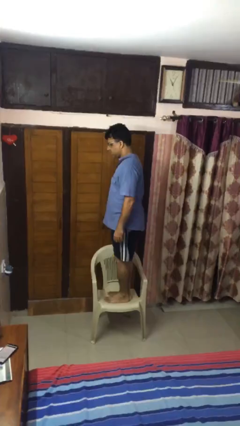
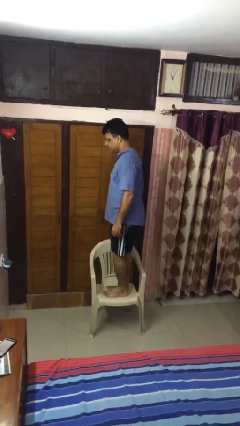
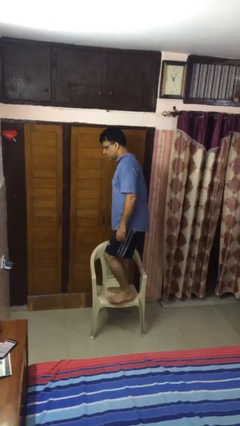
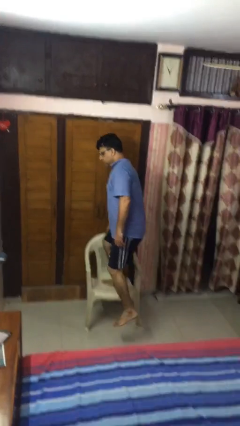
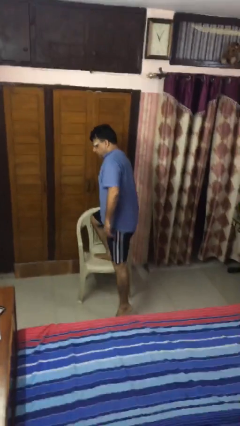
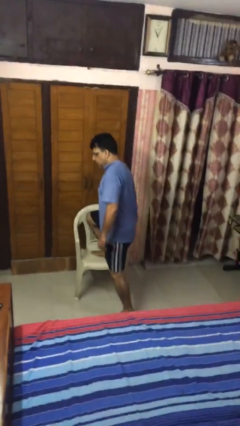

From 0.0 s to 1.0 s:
person climbs off chair

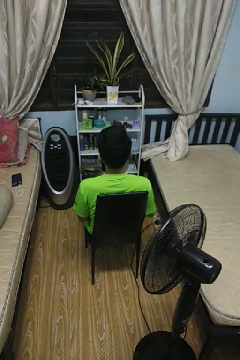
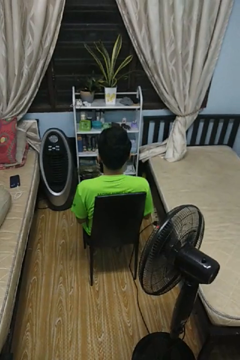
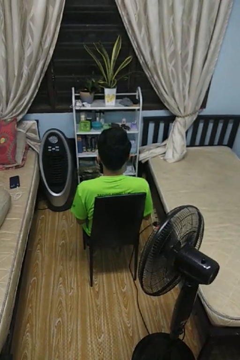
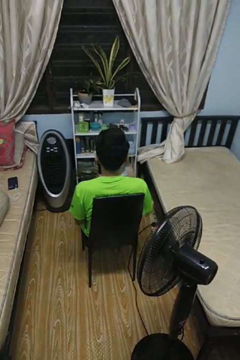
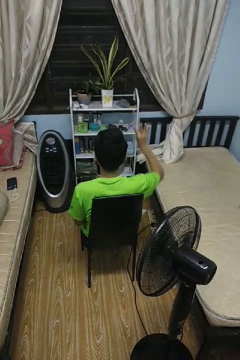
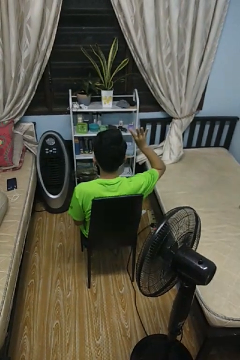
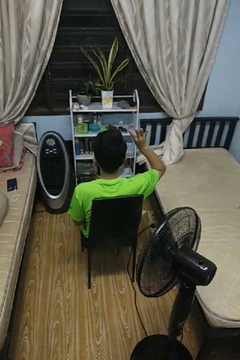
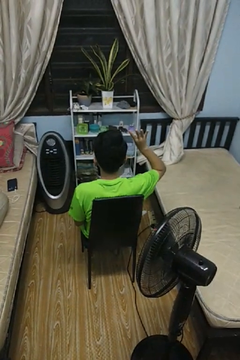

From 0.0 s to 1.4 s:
person gestures number four

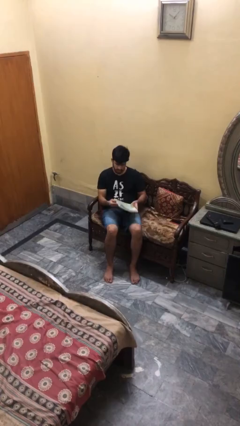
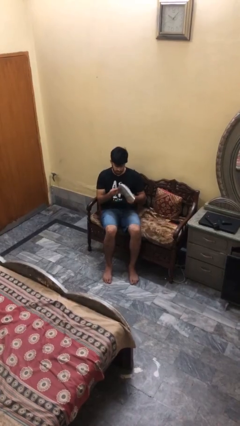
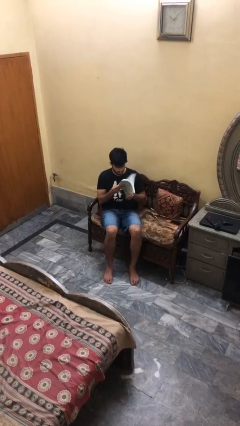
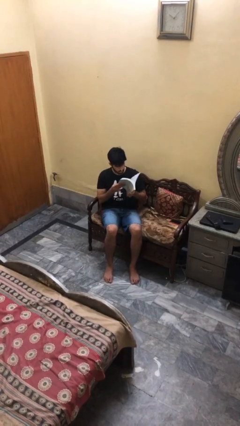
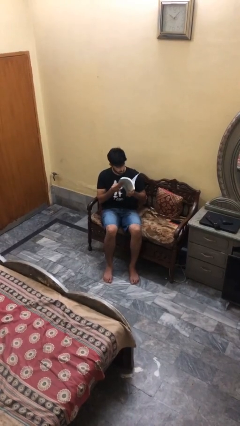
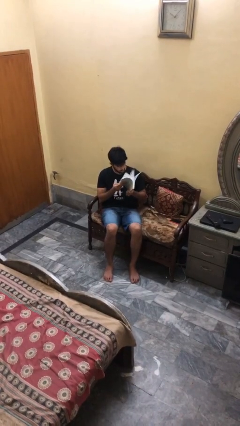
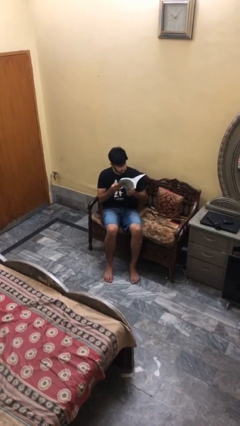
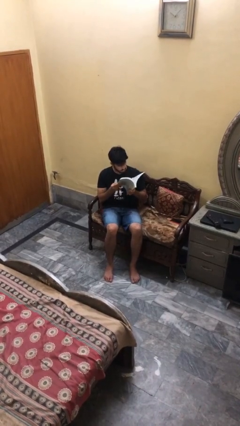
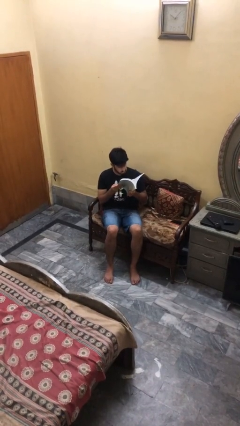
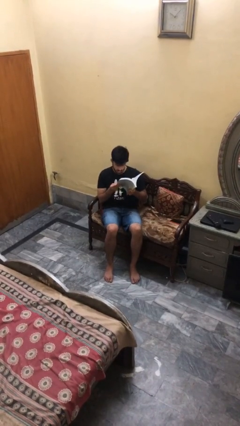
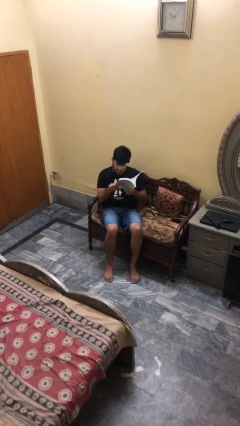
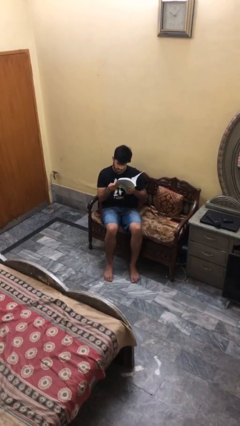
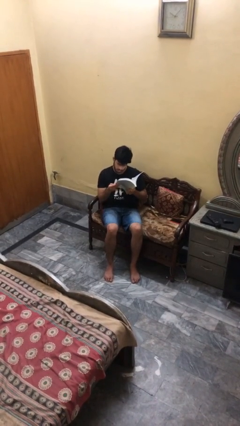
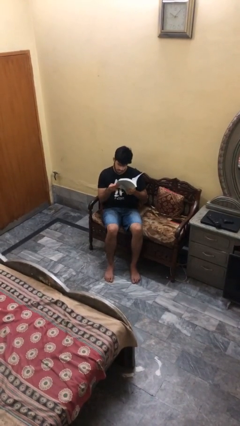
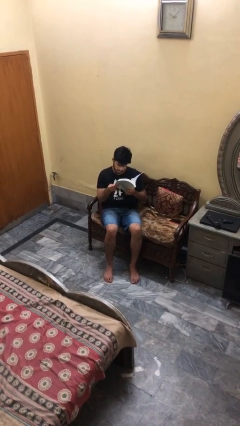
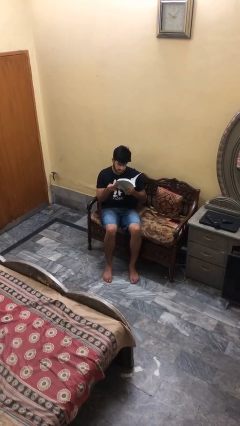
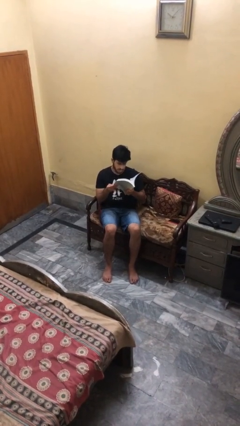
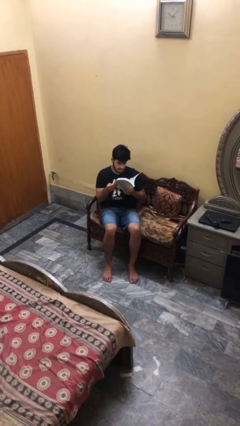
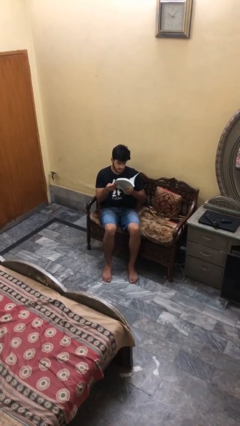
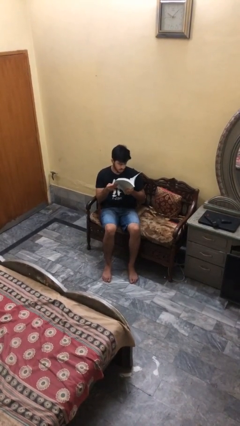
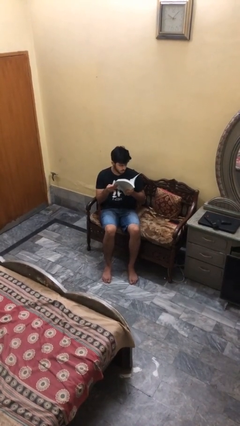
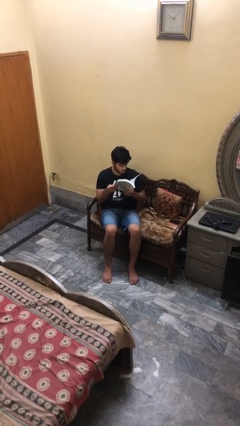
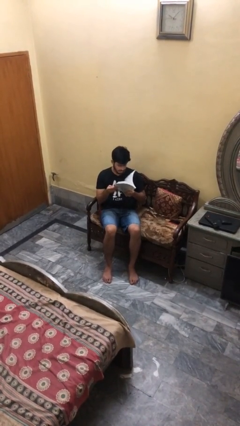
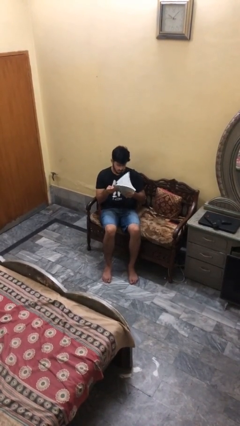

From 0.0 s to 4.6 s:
person reads book

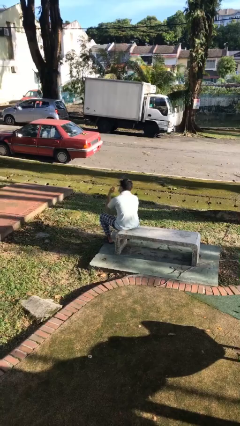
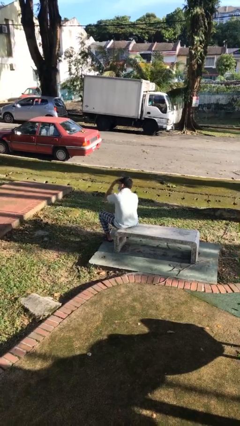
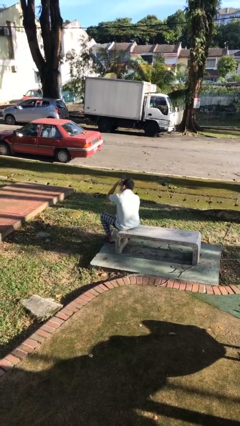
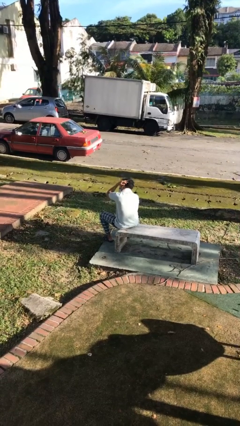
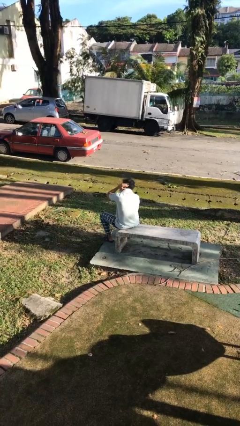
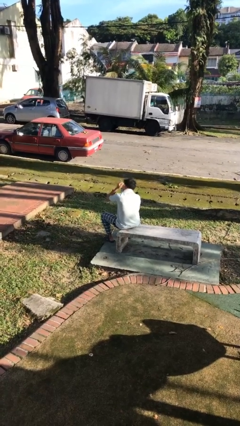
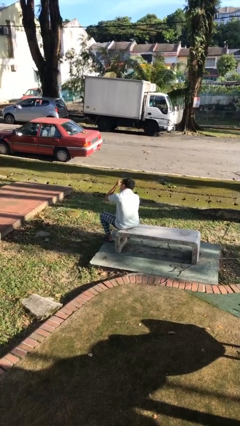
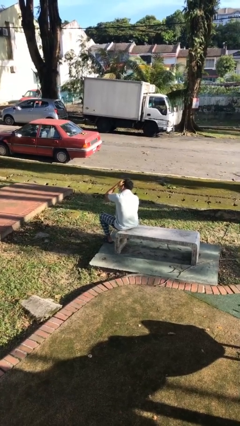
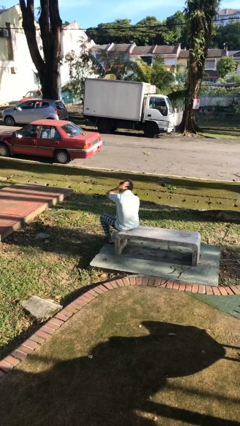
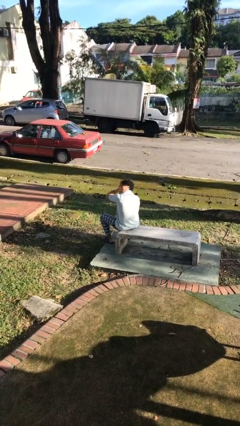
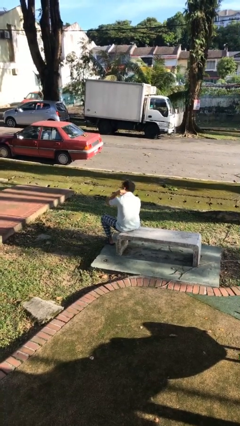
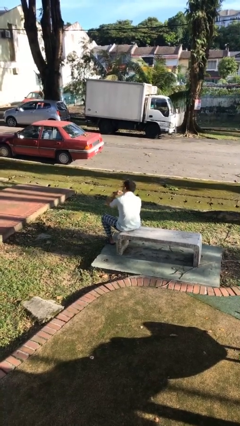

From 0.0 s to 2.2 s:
person strokes hair

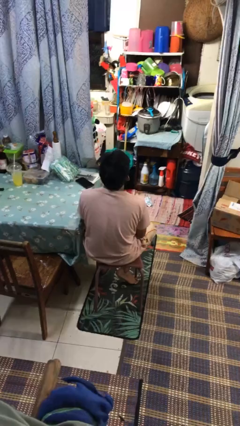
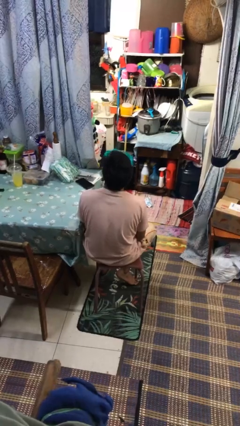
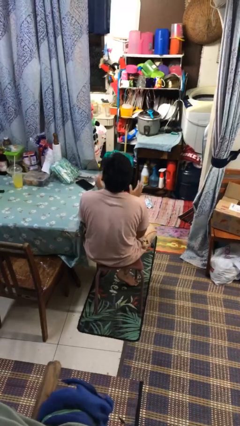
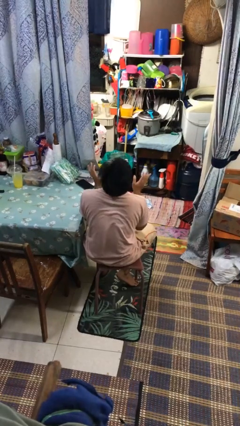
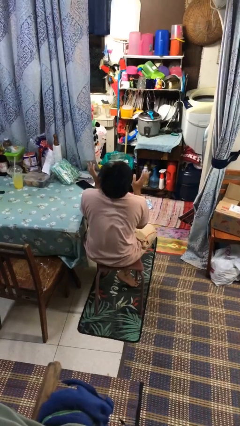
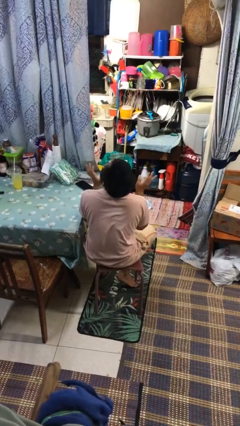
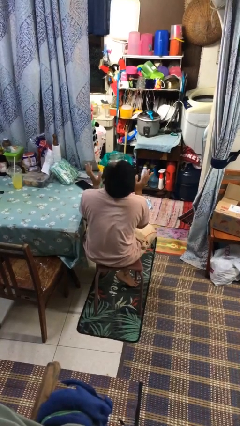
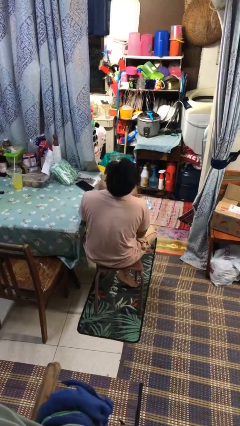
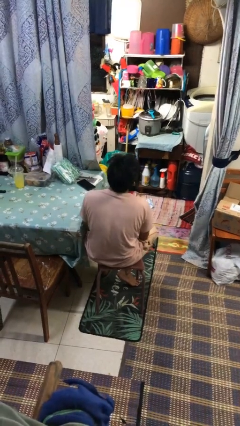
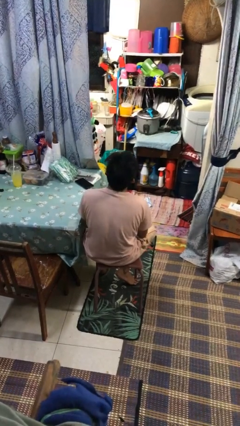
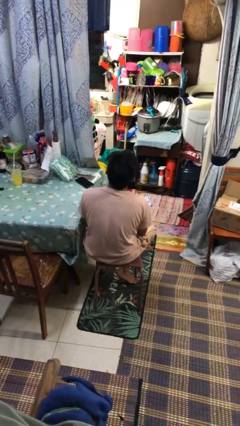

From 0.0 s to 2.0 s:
person sticks out tongue

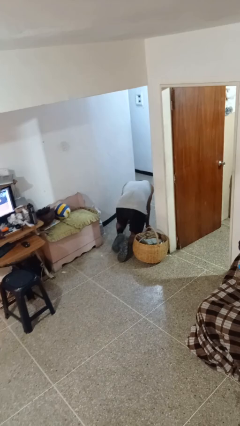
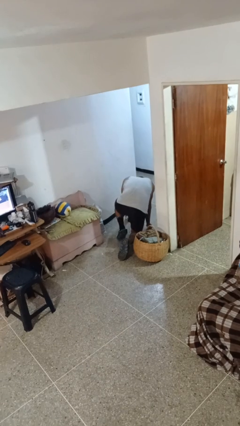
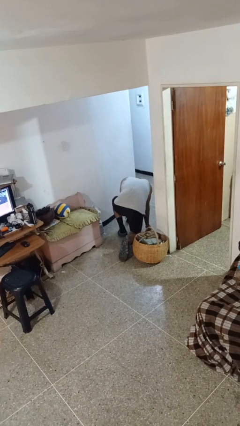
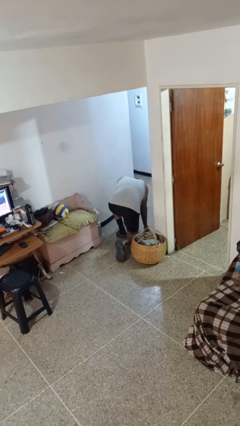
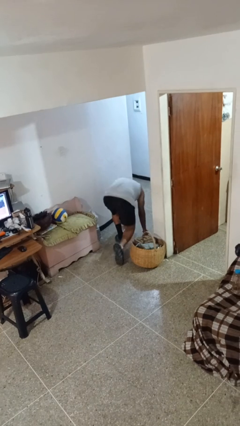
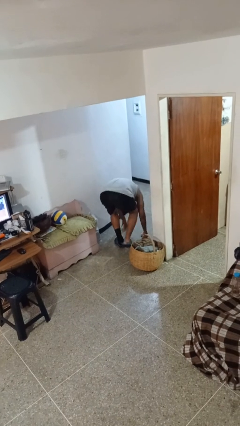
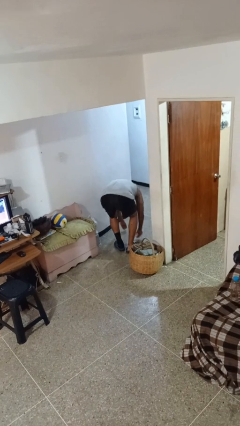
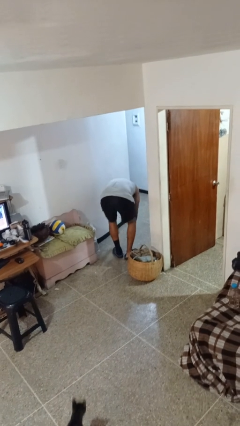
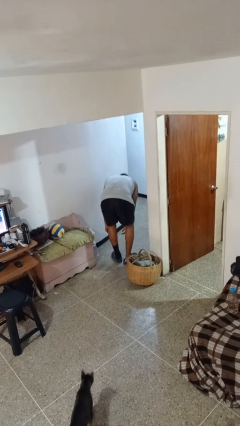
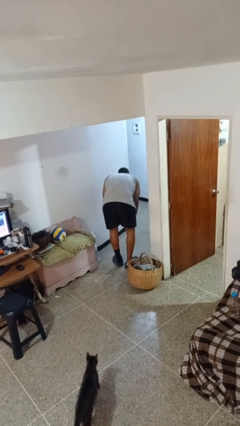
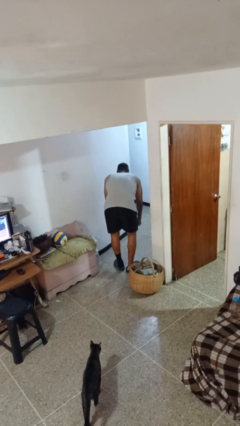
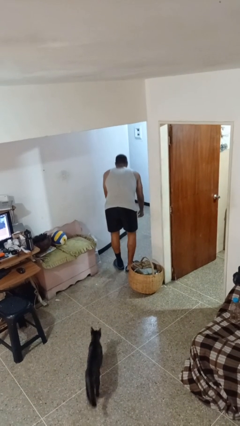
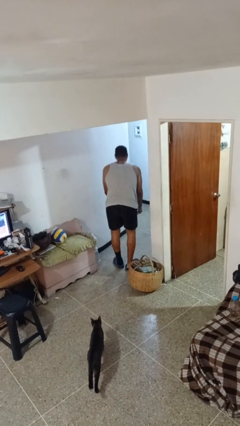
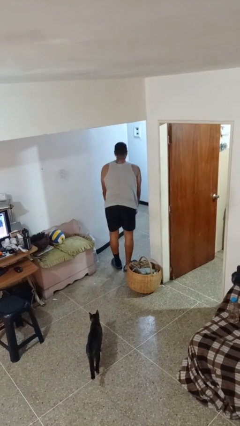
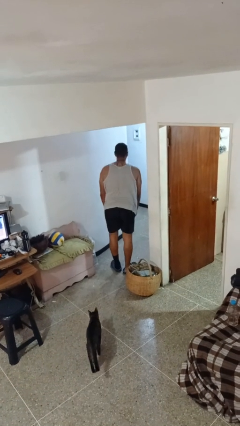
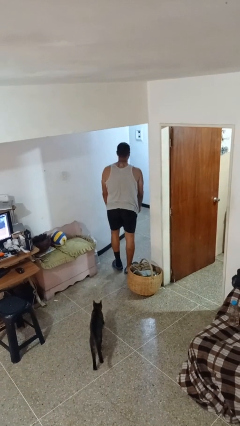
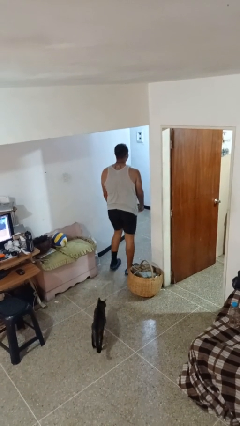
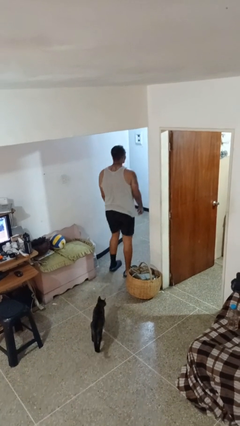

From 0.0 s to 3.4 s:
person stands up from floor

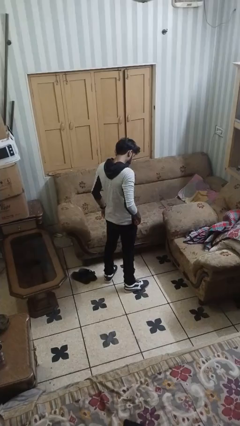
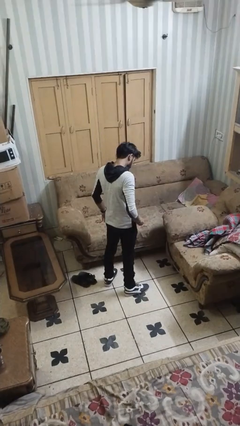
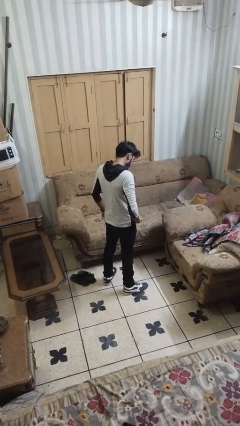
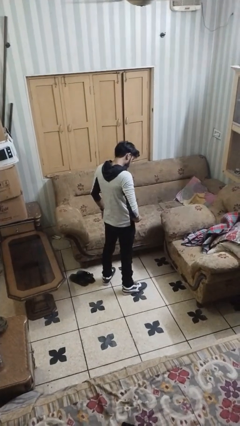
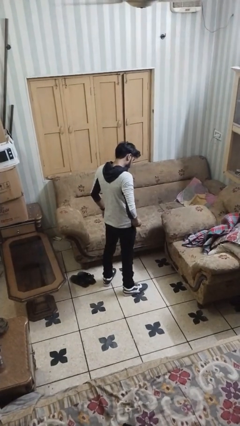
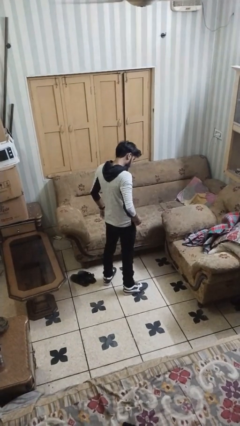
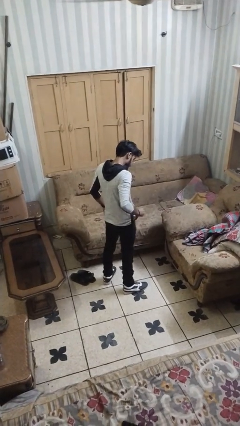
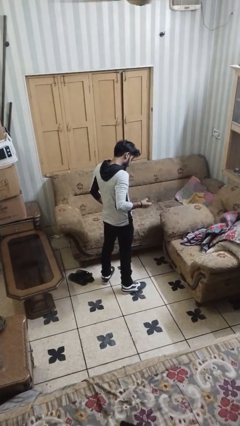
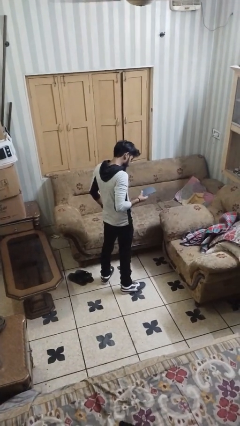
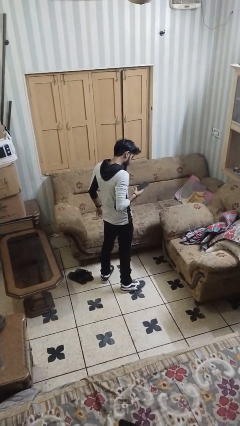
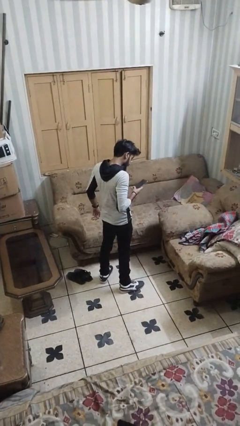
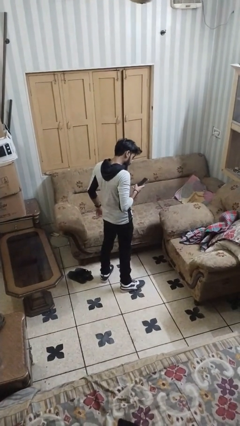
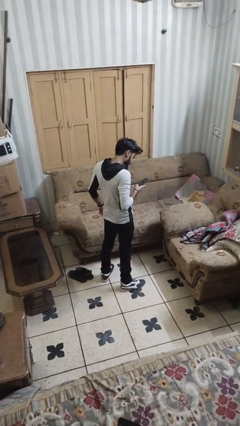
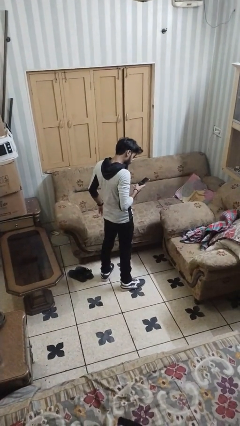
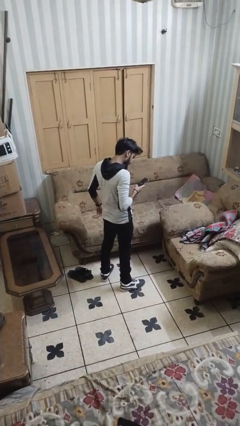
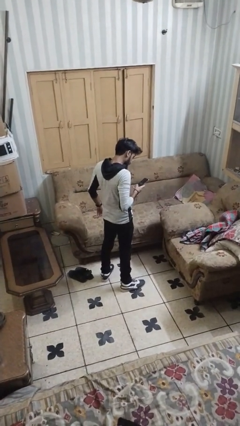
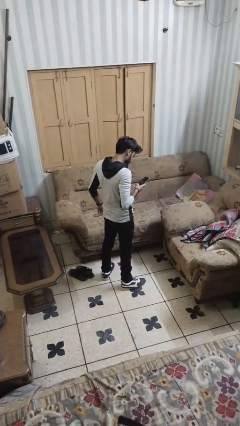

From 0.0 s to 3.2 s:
person takes phone from pocket
